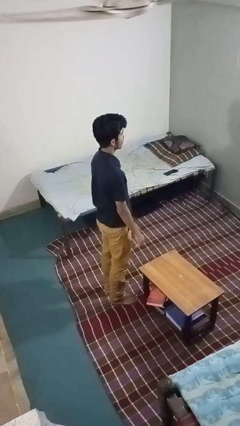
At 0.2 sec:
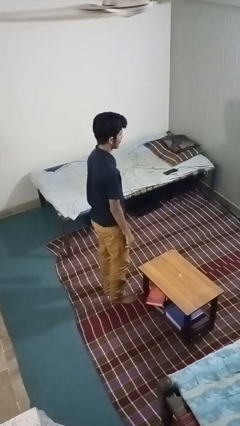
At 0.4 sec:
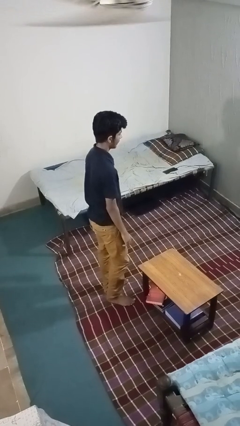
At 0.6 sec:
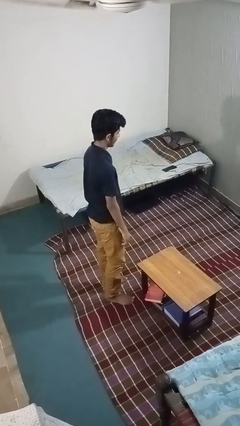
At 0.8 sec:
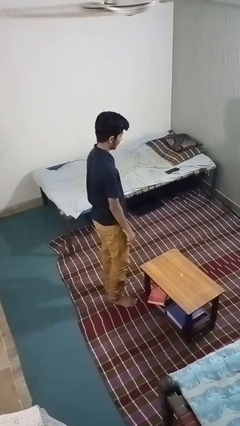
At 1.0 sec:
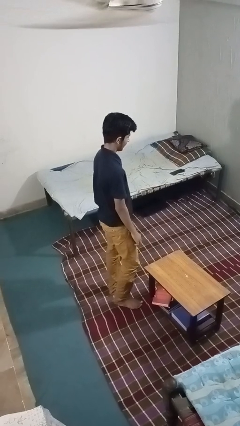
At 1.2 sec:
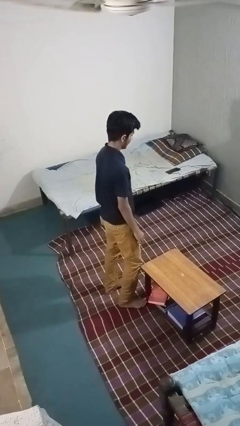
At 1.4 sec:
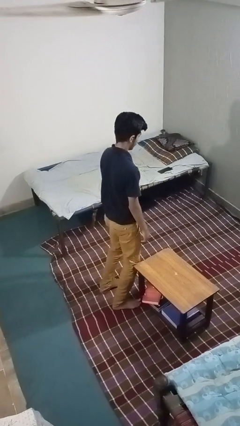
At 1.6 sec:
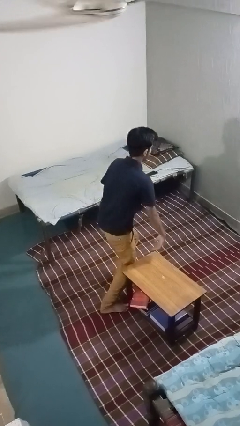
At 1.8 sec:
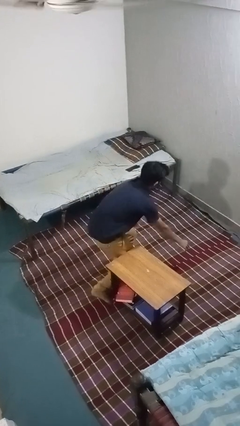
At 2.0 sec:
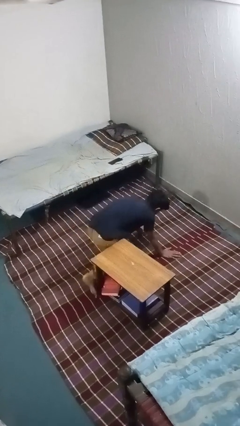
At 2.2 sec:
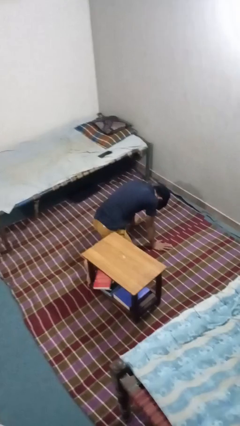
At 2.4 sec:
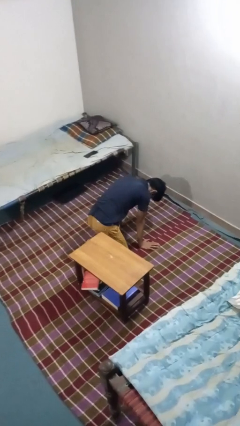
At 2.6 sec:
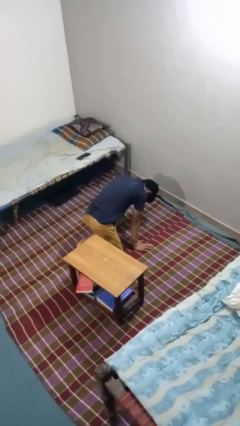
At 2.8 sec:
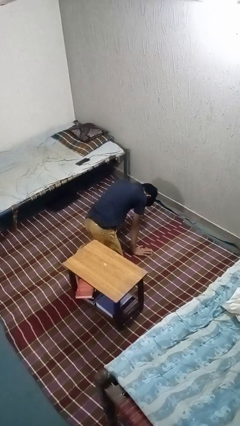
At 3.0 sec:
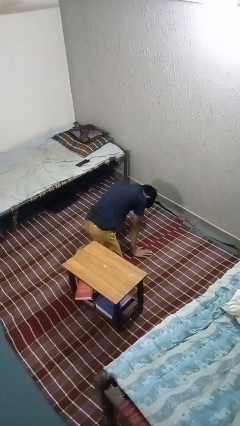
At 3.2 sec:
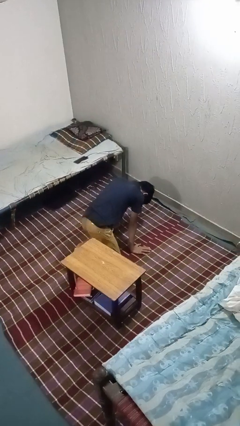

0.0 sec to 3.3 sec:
person trips on object on floor

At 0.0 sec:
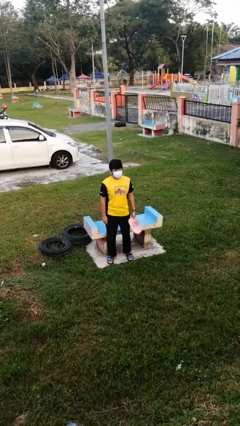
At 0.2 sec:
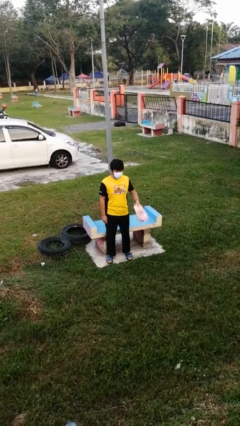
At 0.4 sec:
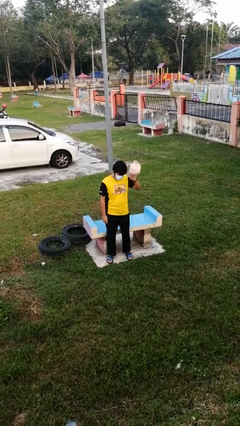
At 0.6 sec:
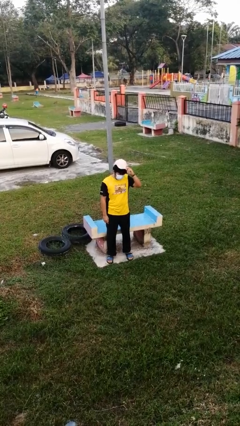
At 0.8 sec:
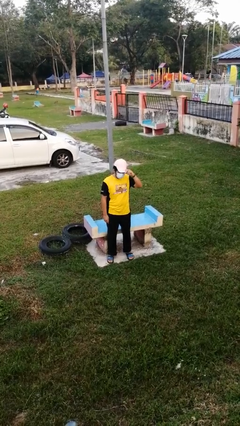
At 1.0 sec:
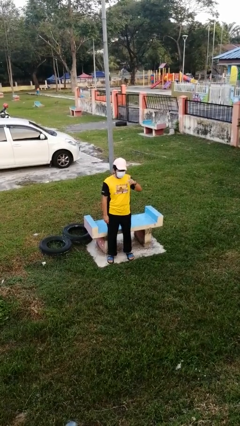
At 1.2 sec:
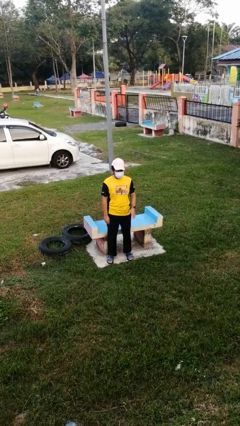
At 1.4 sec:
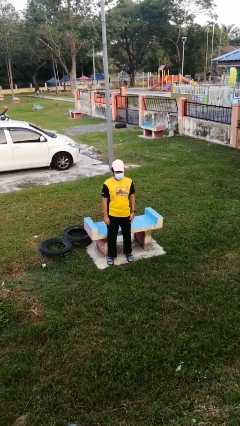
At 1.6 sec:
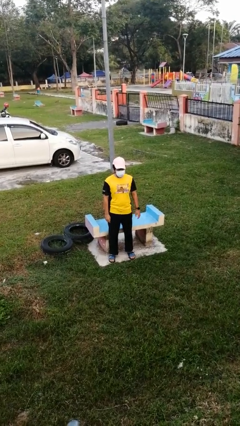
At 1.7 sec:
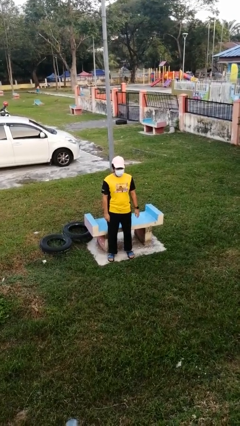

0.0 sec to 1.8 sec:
person puts on hat

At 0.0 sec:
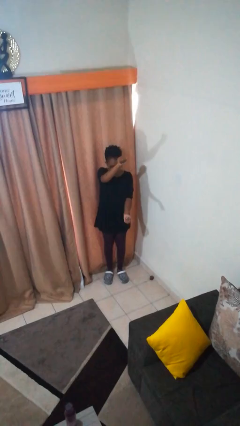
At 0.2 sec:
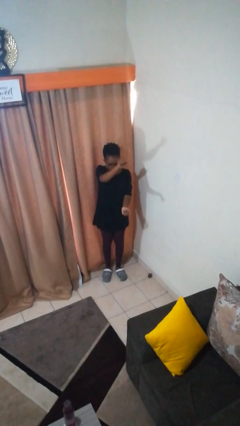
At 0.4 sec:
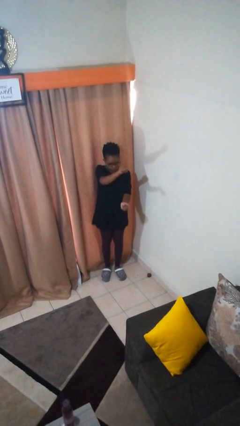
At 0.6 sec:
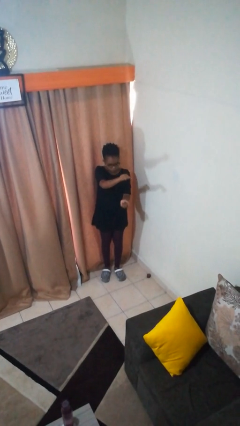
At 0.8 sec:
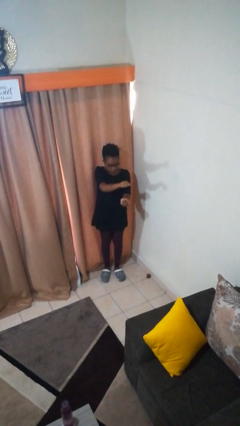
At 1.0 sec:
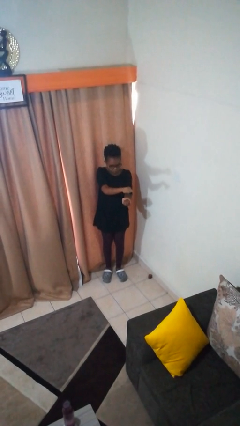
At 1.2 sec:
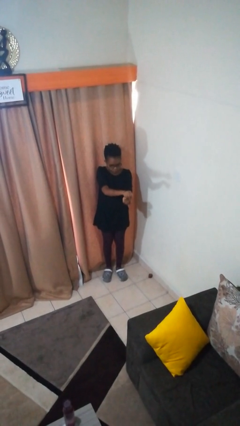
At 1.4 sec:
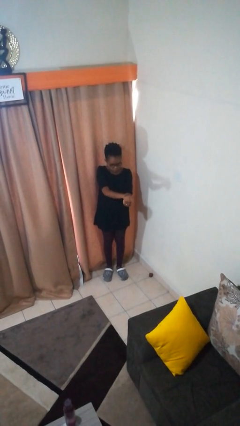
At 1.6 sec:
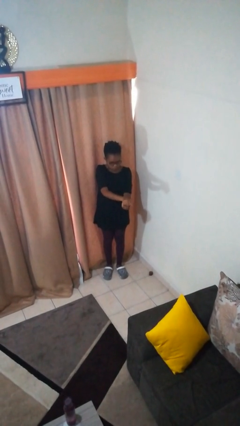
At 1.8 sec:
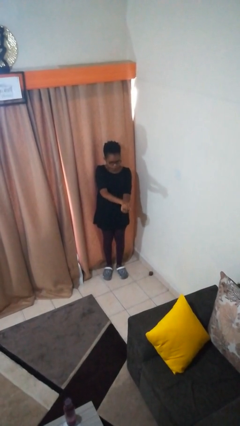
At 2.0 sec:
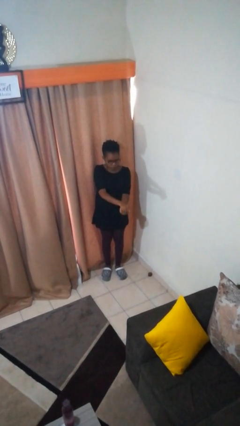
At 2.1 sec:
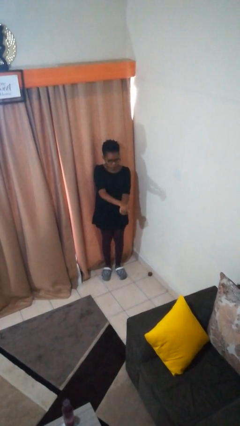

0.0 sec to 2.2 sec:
person gestures zoom out

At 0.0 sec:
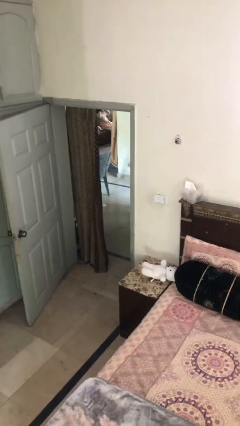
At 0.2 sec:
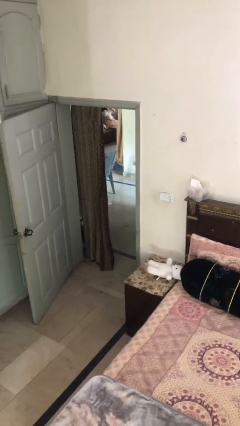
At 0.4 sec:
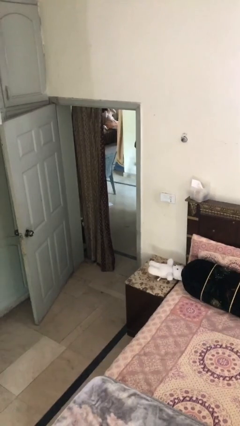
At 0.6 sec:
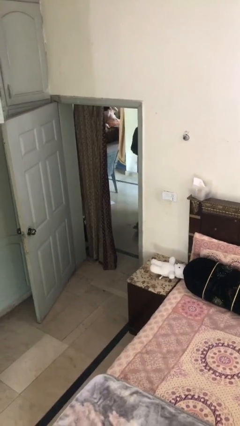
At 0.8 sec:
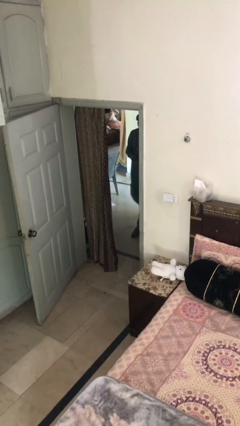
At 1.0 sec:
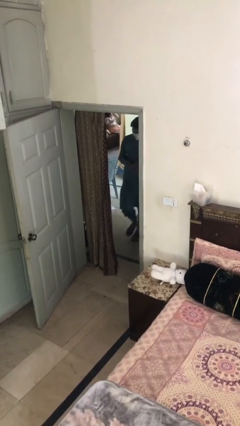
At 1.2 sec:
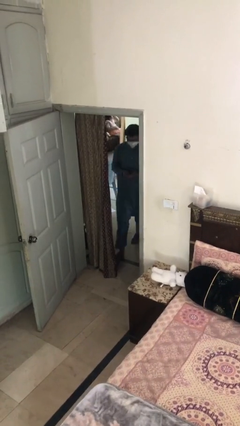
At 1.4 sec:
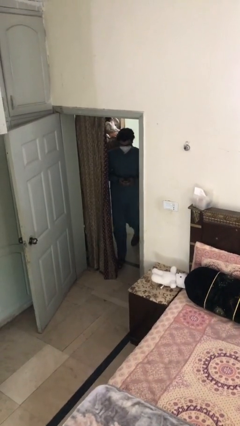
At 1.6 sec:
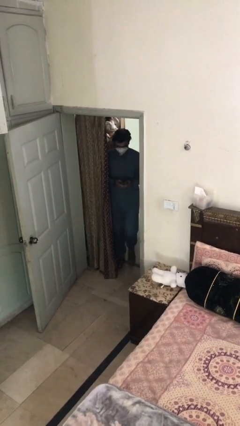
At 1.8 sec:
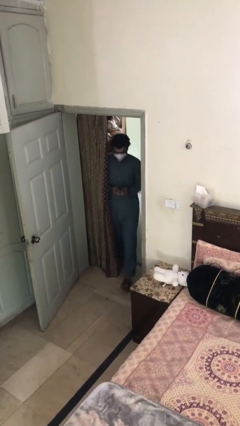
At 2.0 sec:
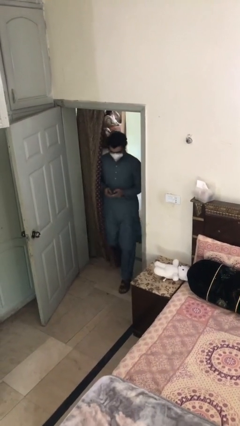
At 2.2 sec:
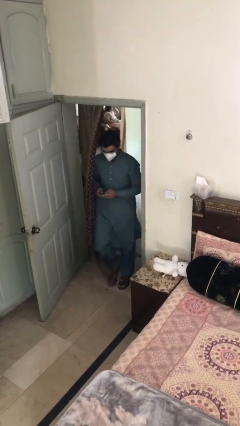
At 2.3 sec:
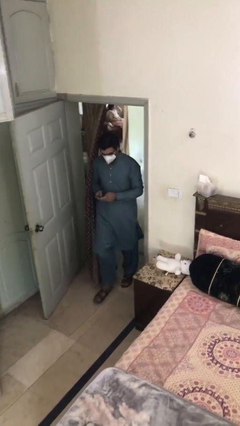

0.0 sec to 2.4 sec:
person enters scene through structure

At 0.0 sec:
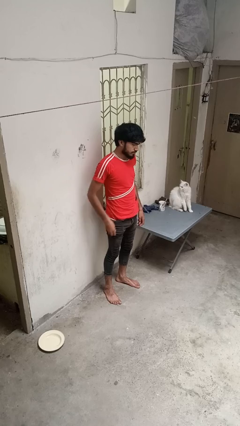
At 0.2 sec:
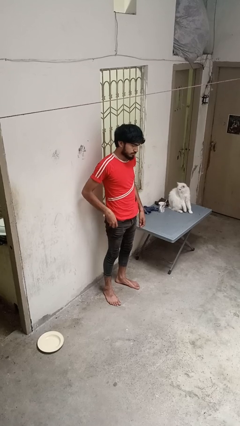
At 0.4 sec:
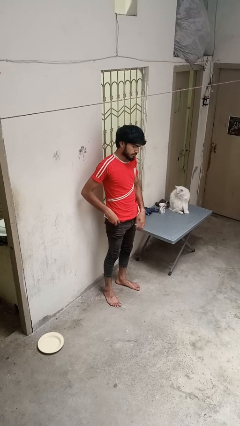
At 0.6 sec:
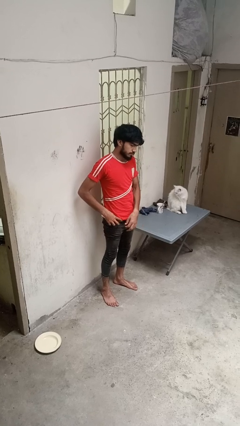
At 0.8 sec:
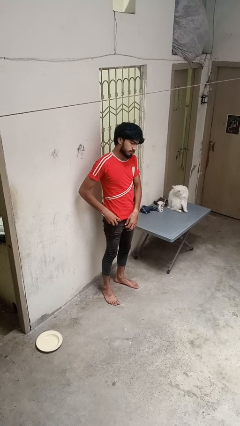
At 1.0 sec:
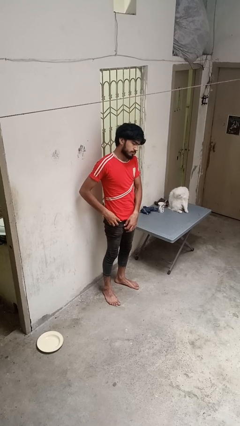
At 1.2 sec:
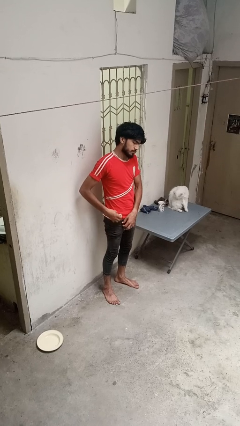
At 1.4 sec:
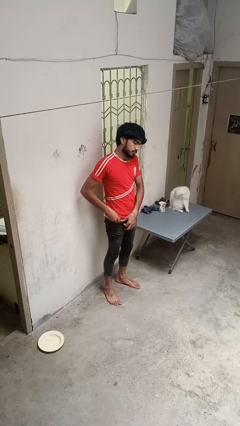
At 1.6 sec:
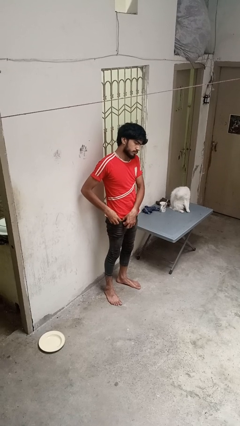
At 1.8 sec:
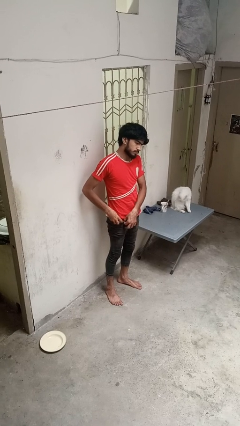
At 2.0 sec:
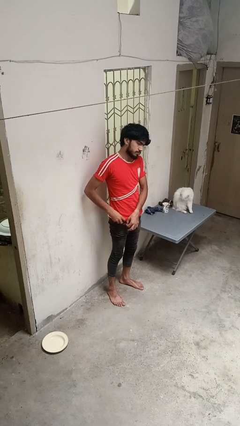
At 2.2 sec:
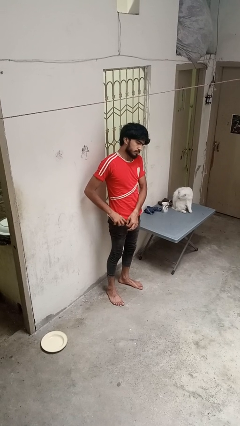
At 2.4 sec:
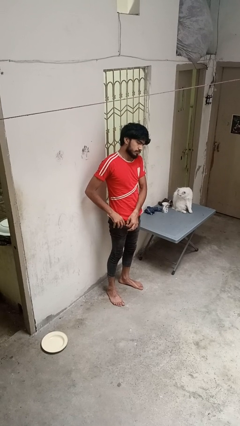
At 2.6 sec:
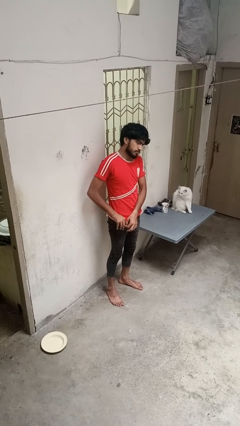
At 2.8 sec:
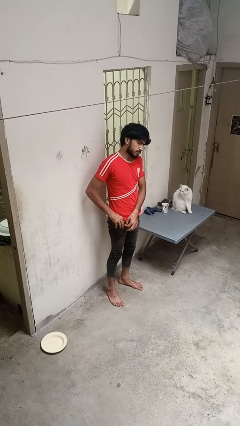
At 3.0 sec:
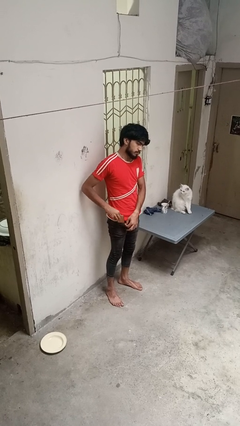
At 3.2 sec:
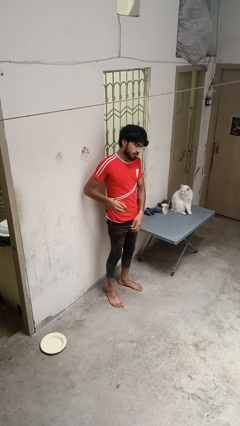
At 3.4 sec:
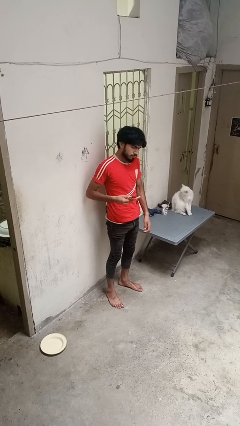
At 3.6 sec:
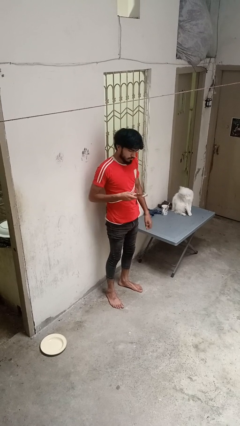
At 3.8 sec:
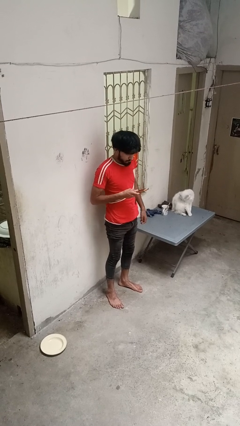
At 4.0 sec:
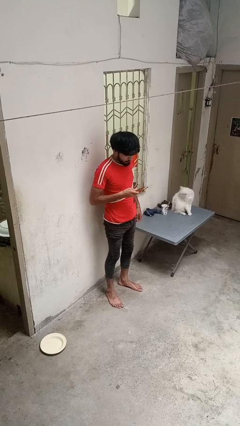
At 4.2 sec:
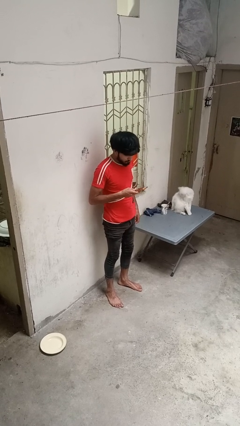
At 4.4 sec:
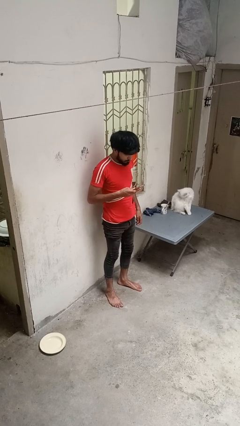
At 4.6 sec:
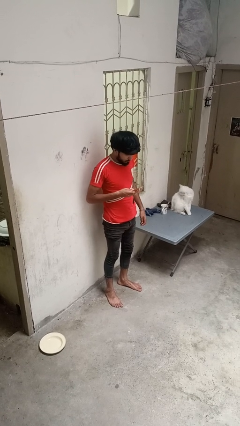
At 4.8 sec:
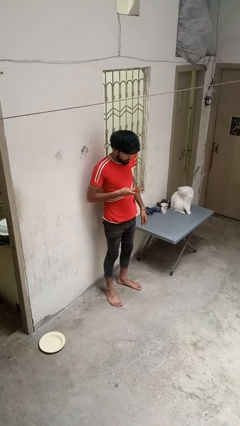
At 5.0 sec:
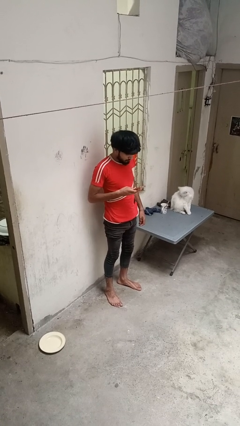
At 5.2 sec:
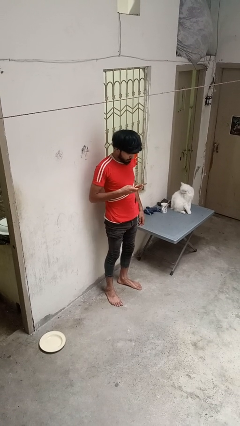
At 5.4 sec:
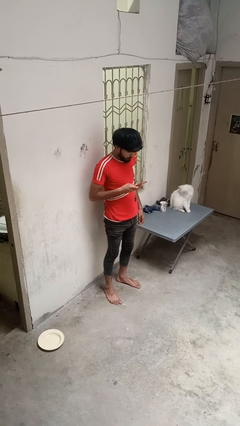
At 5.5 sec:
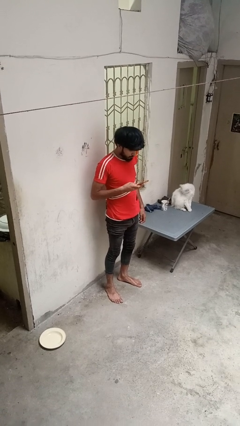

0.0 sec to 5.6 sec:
person takes phone from pocket

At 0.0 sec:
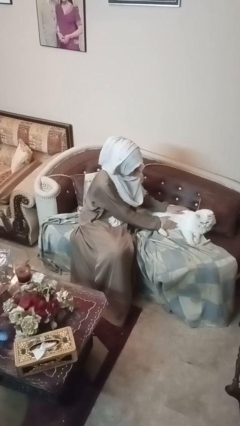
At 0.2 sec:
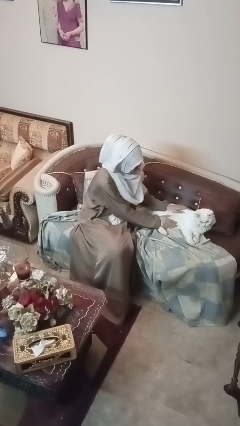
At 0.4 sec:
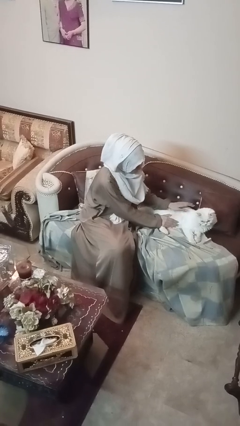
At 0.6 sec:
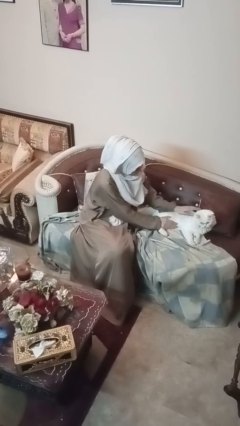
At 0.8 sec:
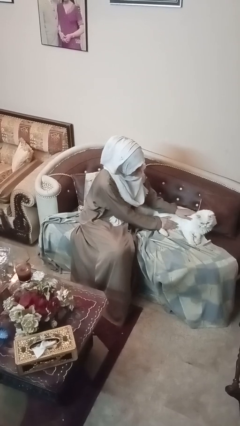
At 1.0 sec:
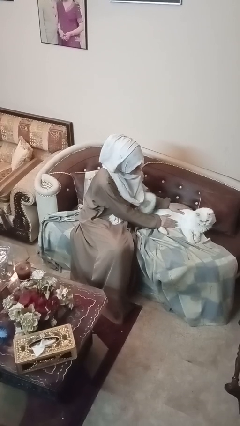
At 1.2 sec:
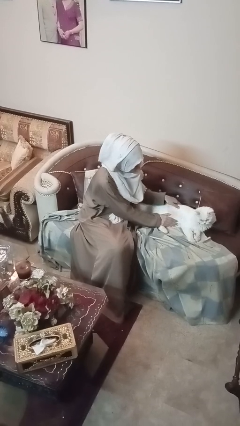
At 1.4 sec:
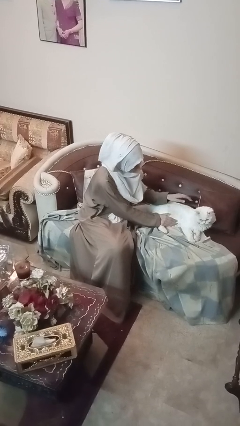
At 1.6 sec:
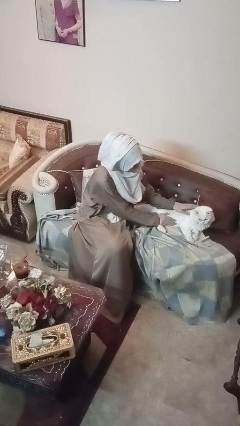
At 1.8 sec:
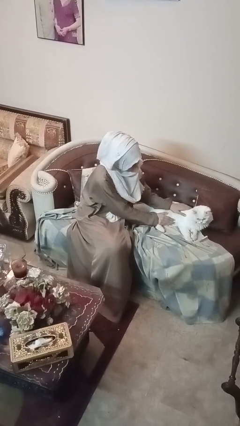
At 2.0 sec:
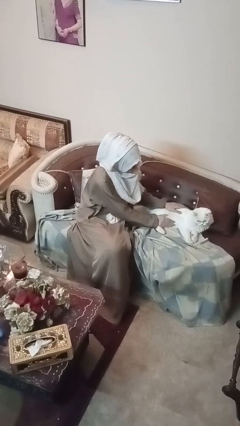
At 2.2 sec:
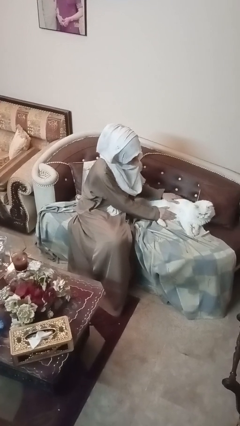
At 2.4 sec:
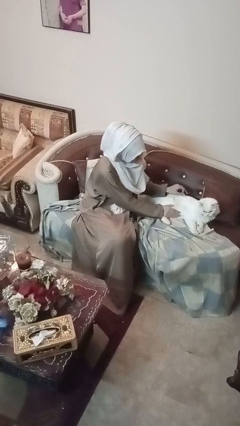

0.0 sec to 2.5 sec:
person pets cat
